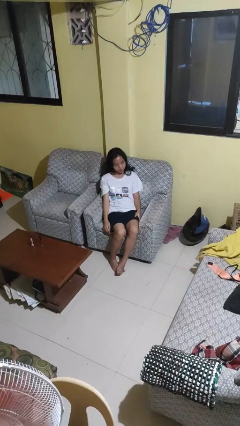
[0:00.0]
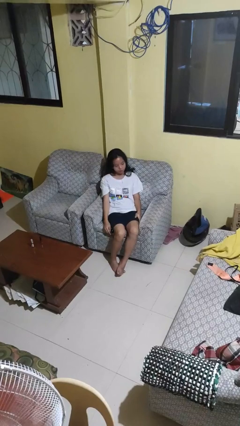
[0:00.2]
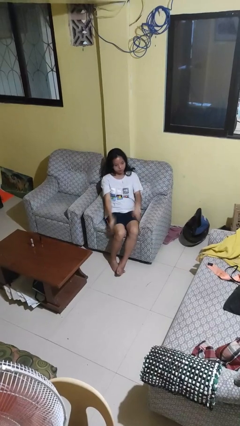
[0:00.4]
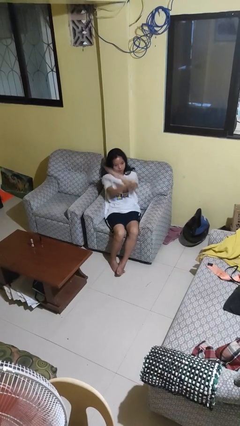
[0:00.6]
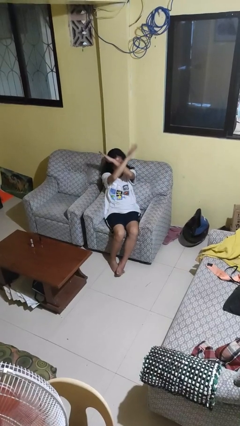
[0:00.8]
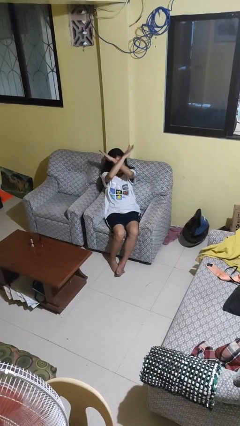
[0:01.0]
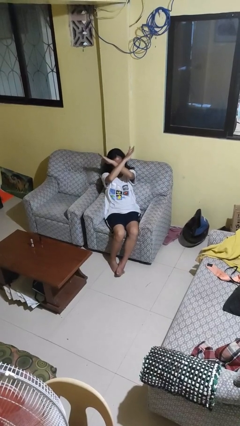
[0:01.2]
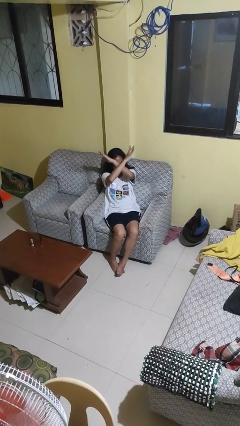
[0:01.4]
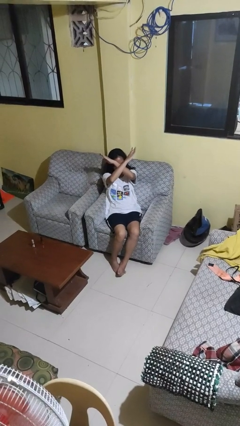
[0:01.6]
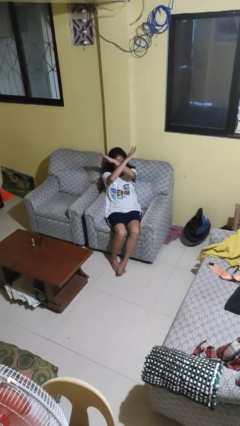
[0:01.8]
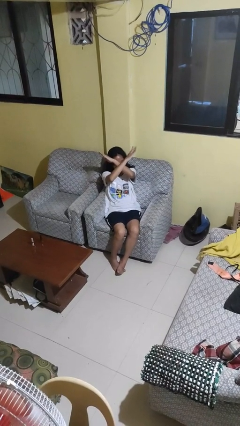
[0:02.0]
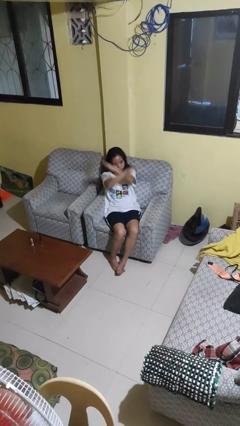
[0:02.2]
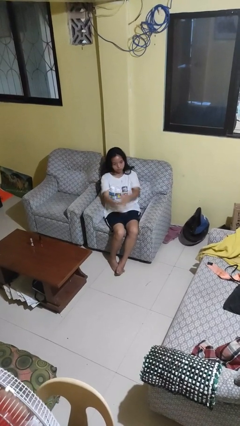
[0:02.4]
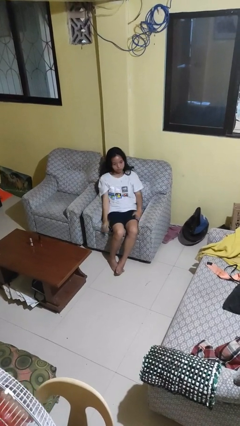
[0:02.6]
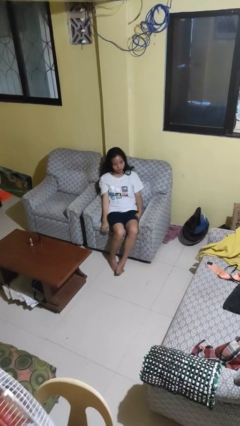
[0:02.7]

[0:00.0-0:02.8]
person gestures arms x

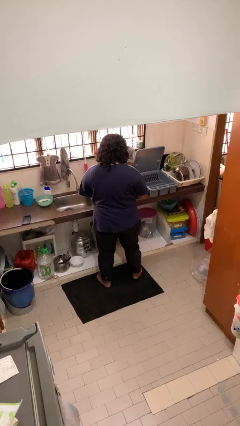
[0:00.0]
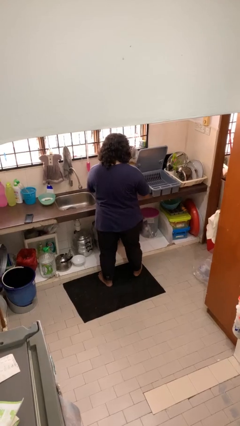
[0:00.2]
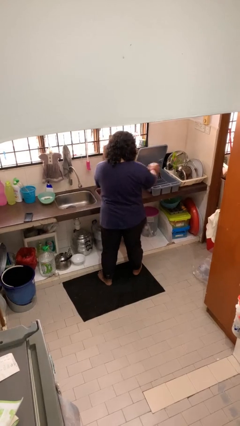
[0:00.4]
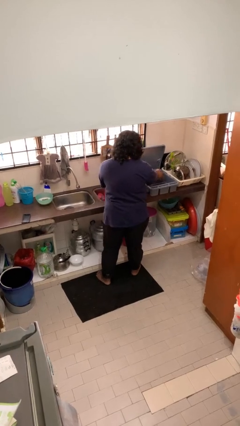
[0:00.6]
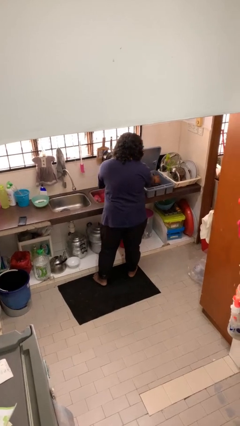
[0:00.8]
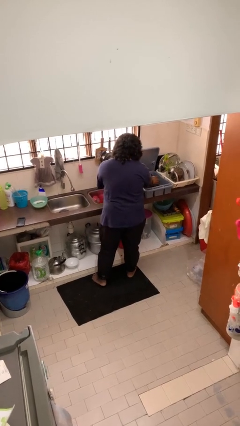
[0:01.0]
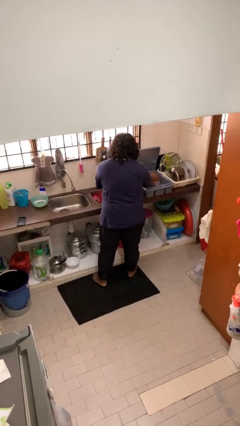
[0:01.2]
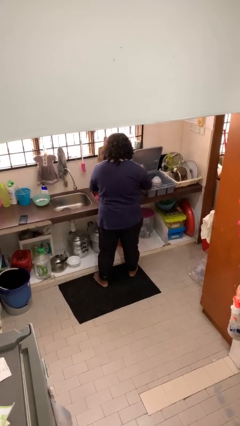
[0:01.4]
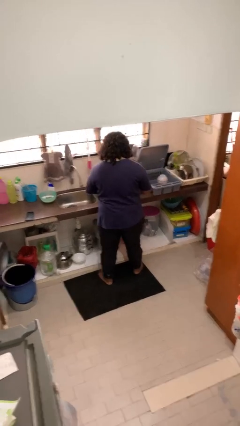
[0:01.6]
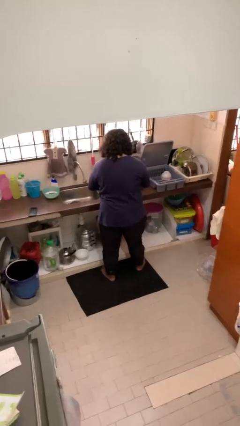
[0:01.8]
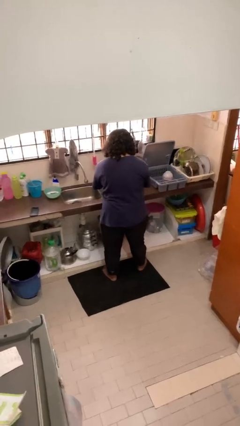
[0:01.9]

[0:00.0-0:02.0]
person loads dishwasher

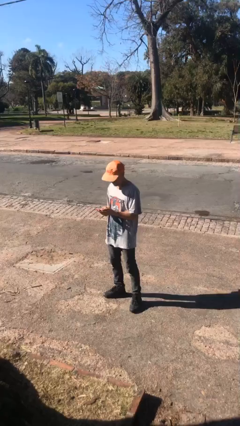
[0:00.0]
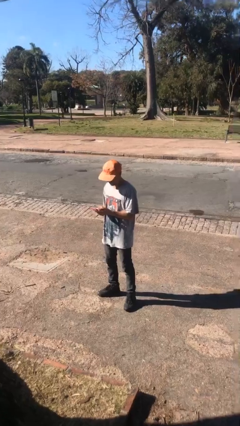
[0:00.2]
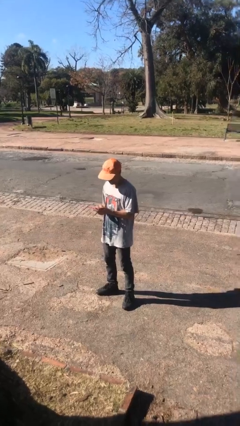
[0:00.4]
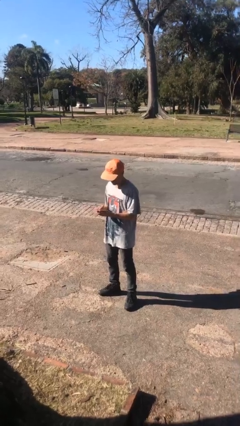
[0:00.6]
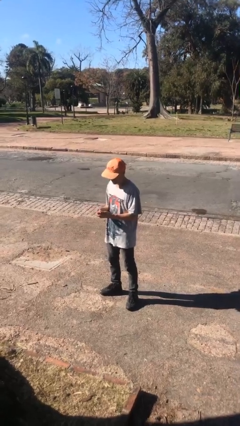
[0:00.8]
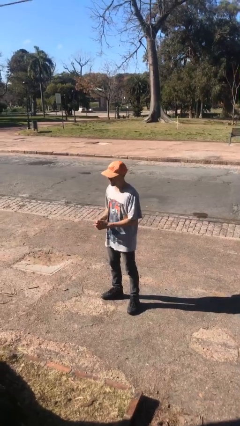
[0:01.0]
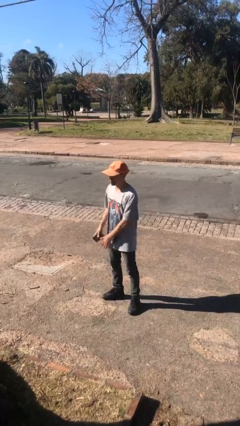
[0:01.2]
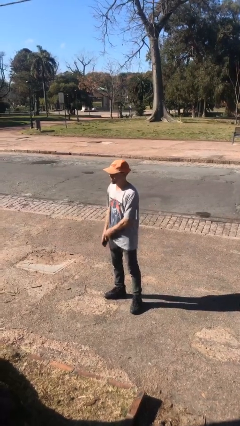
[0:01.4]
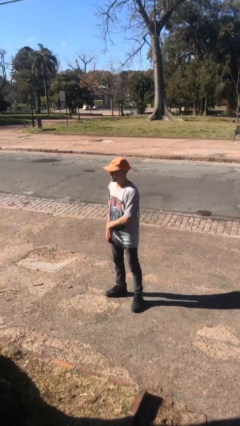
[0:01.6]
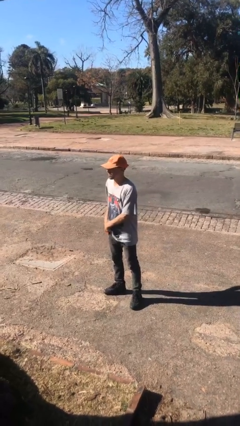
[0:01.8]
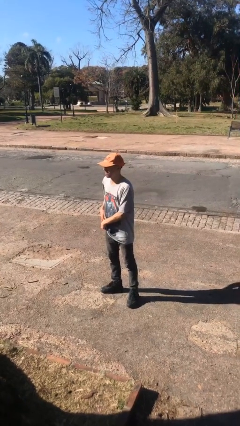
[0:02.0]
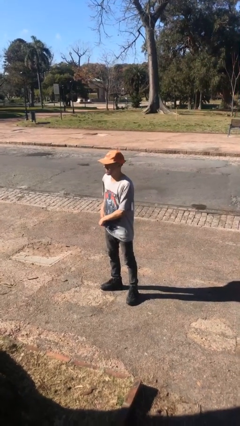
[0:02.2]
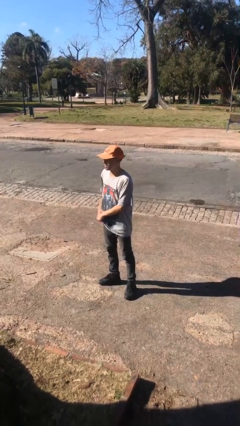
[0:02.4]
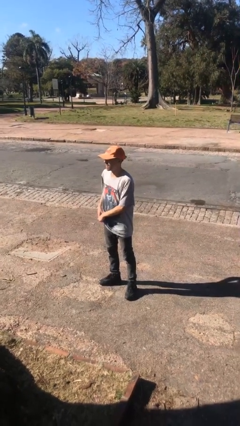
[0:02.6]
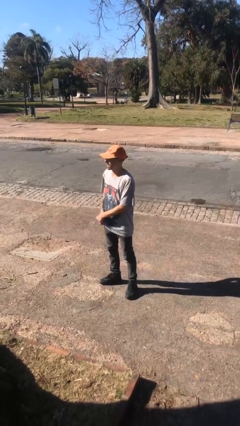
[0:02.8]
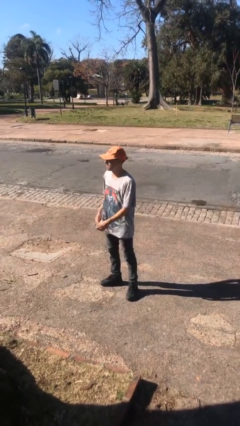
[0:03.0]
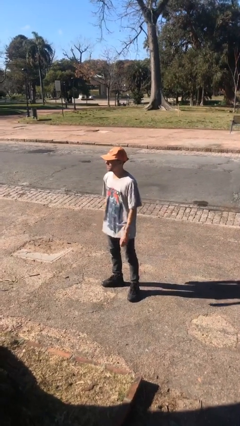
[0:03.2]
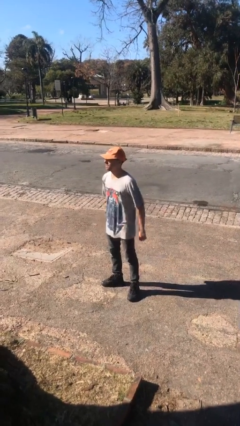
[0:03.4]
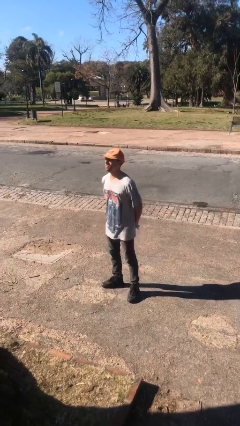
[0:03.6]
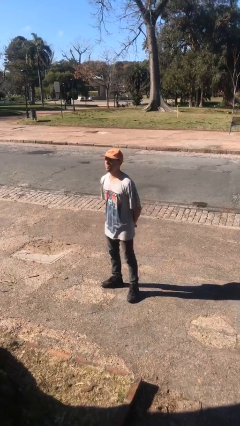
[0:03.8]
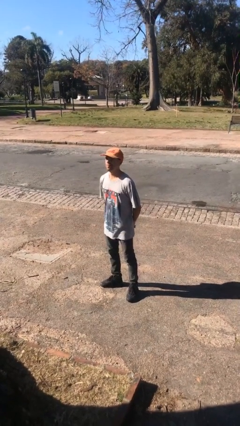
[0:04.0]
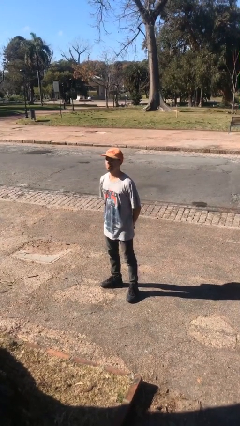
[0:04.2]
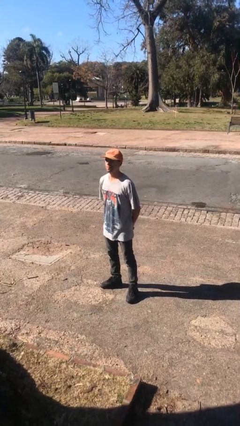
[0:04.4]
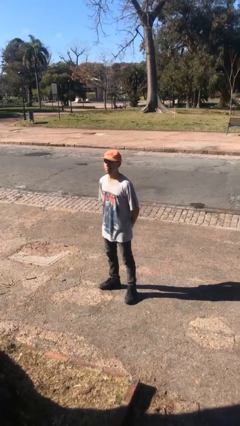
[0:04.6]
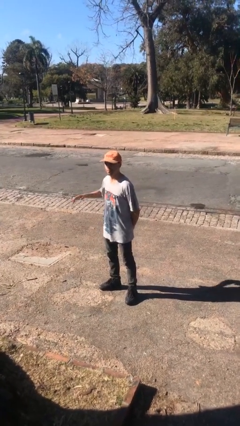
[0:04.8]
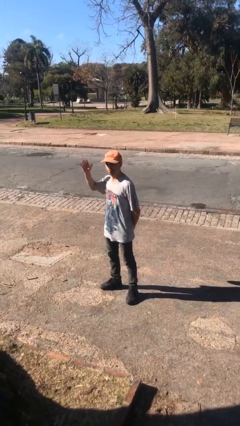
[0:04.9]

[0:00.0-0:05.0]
person puts phone into pocket

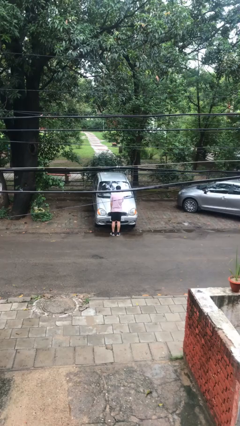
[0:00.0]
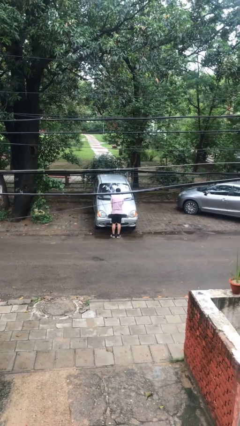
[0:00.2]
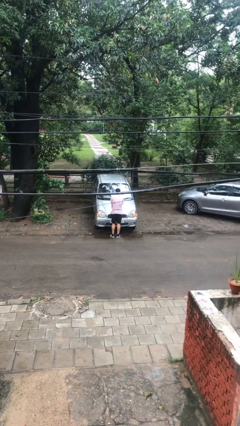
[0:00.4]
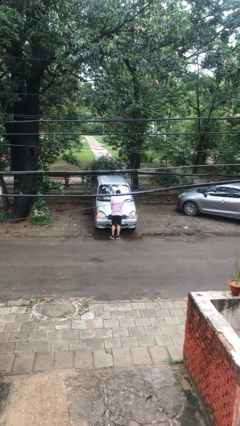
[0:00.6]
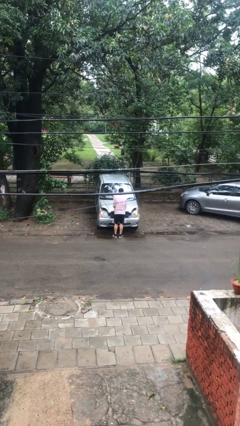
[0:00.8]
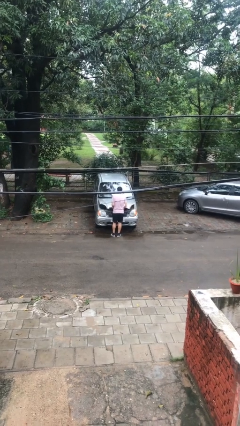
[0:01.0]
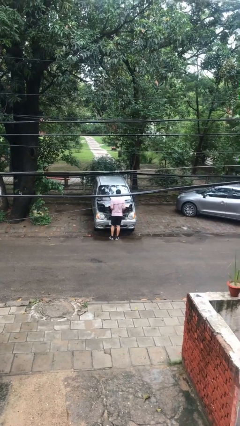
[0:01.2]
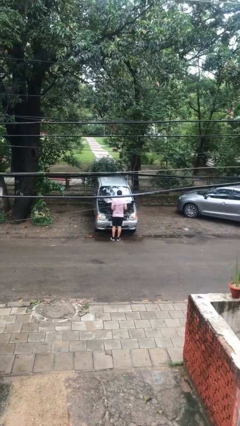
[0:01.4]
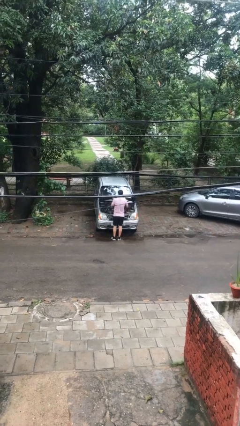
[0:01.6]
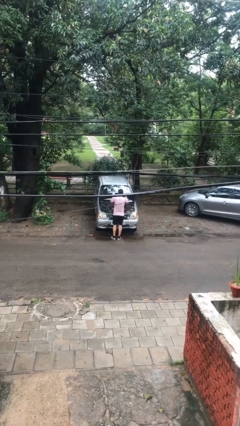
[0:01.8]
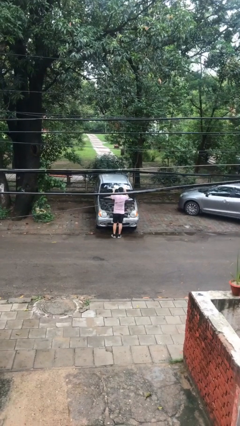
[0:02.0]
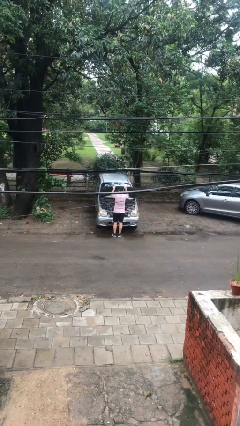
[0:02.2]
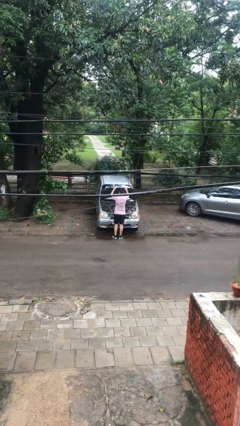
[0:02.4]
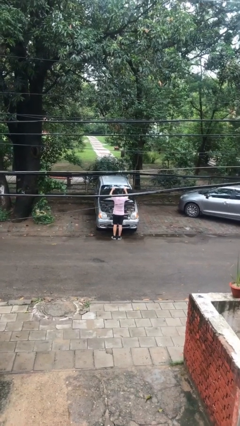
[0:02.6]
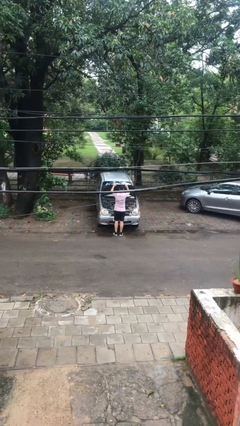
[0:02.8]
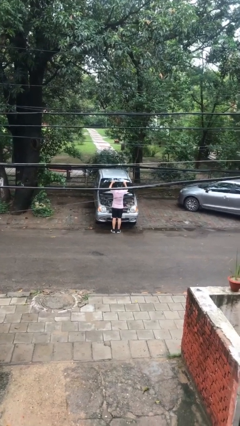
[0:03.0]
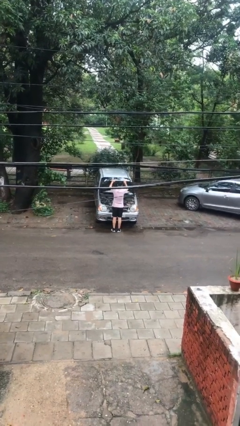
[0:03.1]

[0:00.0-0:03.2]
person opens car hood

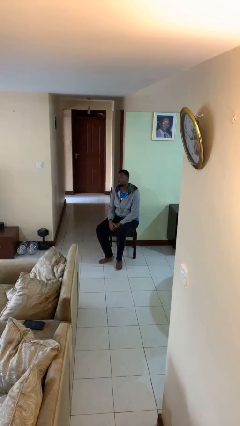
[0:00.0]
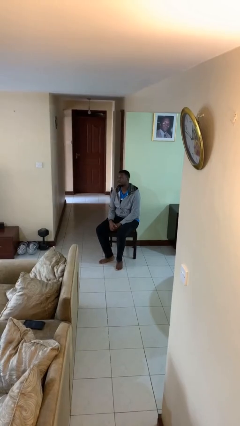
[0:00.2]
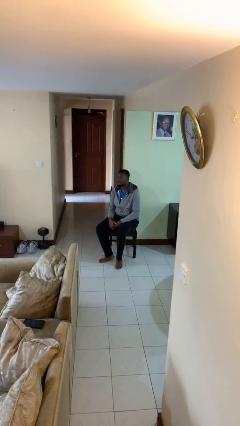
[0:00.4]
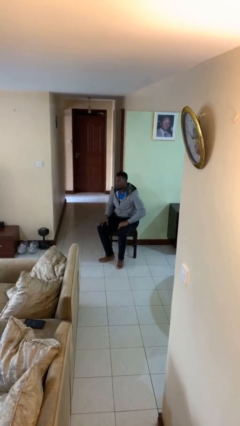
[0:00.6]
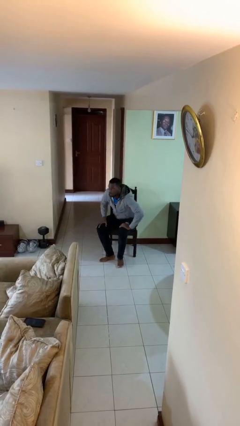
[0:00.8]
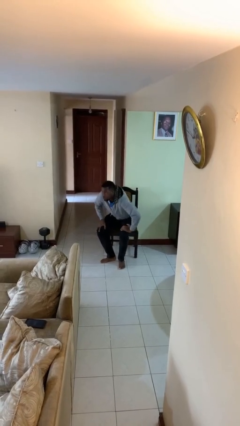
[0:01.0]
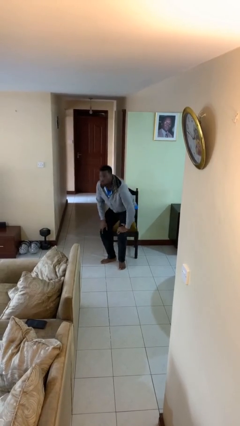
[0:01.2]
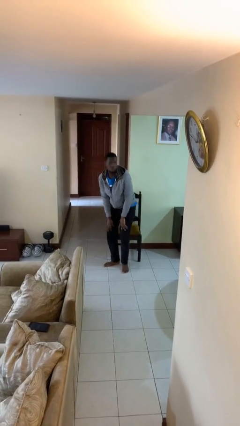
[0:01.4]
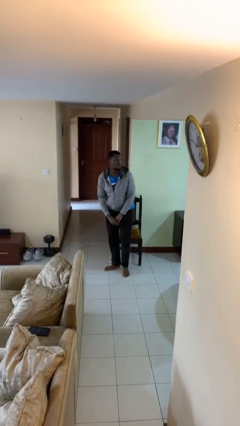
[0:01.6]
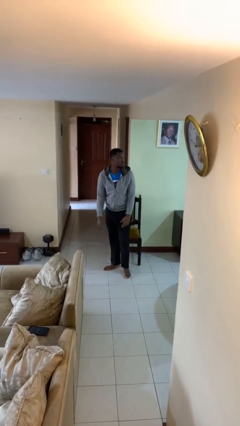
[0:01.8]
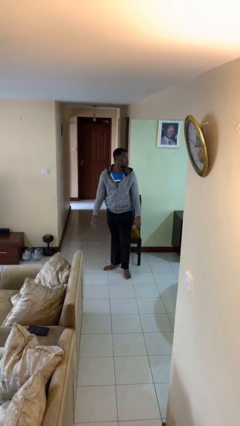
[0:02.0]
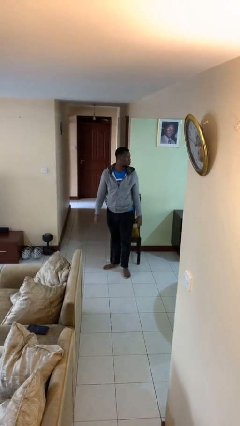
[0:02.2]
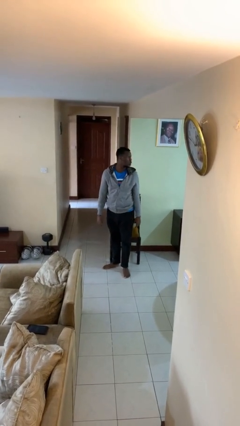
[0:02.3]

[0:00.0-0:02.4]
person stands up

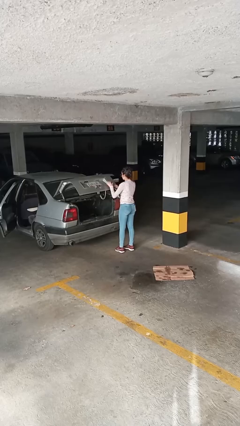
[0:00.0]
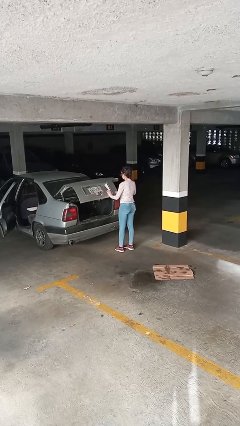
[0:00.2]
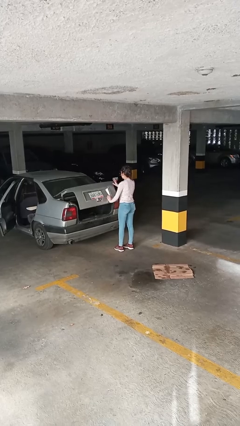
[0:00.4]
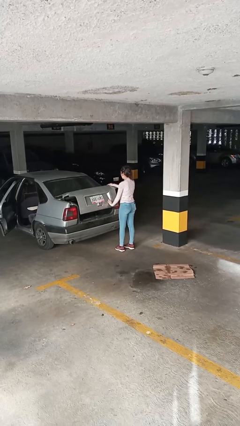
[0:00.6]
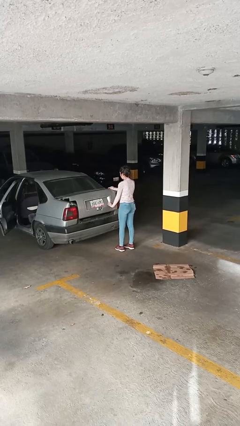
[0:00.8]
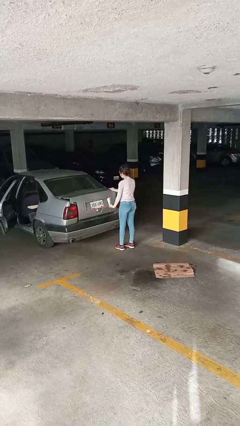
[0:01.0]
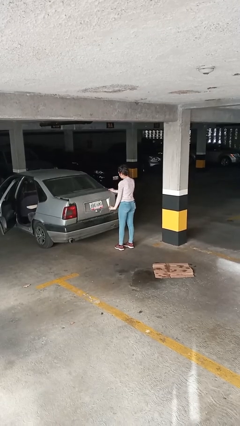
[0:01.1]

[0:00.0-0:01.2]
person closes car trunk

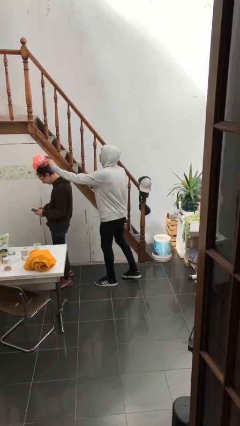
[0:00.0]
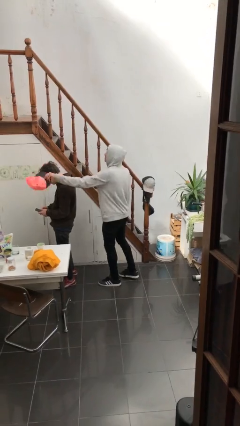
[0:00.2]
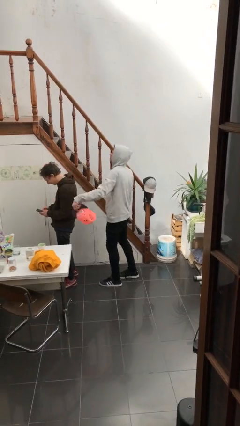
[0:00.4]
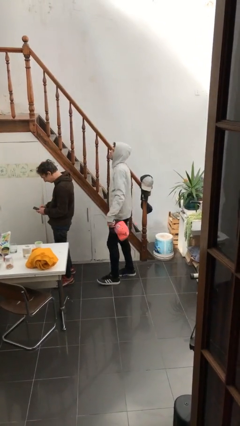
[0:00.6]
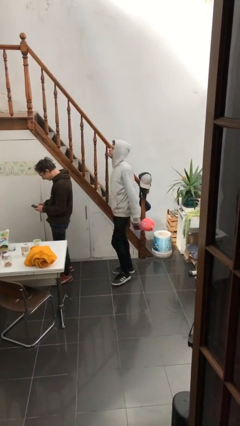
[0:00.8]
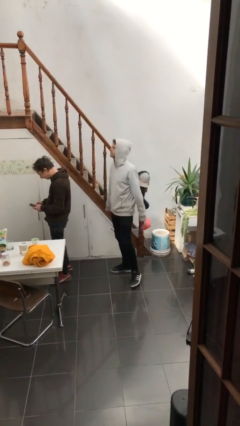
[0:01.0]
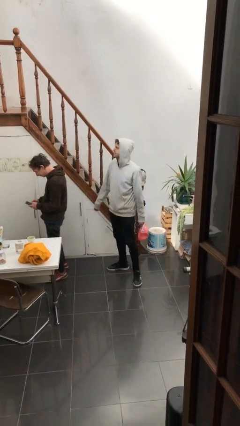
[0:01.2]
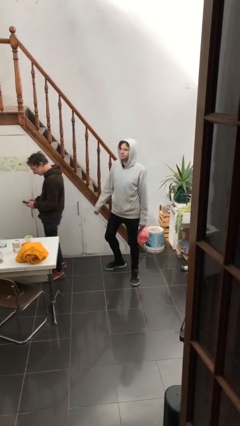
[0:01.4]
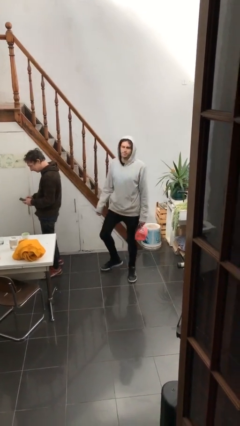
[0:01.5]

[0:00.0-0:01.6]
person steals object from person
